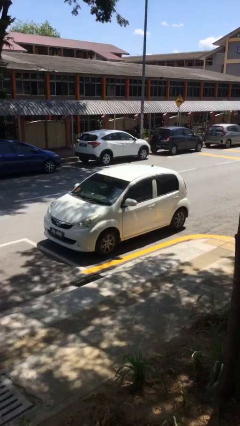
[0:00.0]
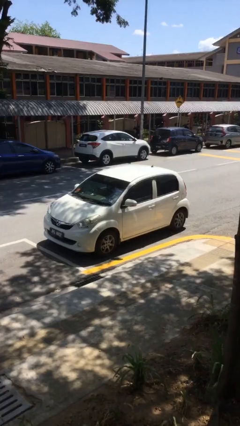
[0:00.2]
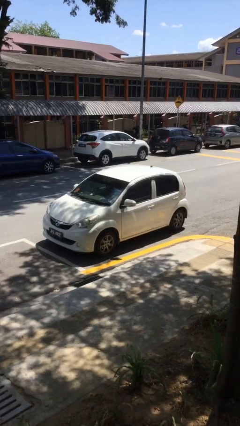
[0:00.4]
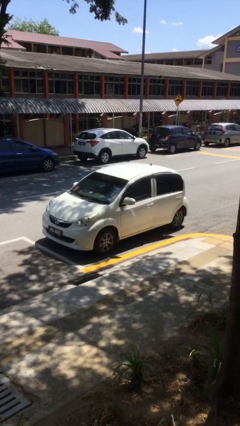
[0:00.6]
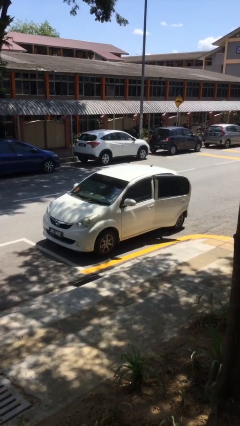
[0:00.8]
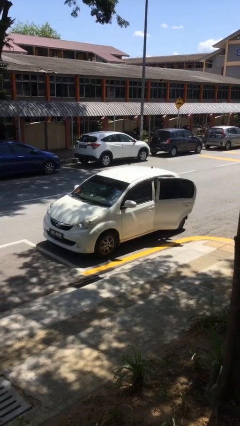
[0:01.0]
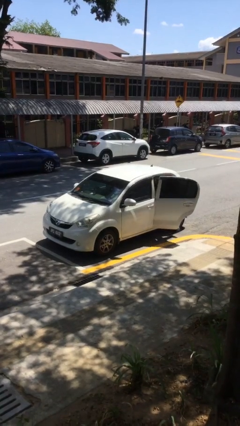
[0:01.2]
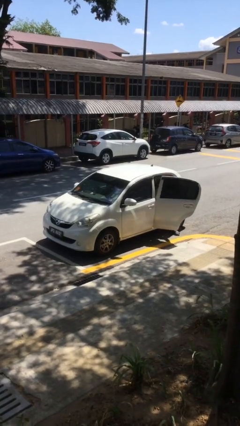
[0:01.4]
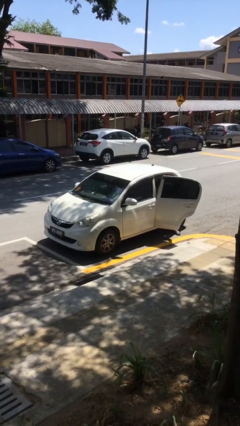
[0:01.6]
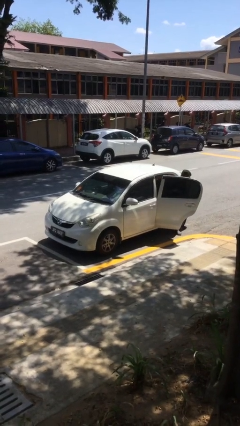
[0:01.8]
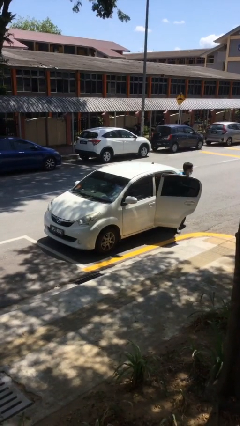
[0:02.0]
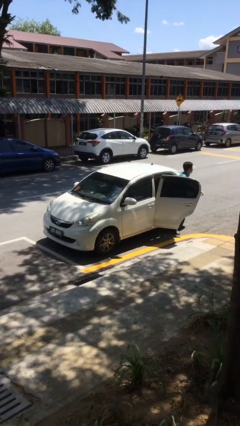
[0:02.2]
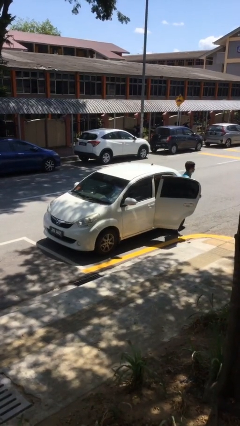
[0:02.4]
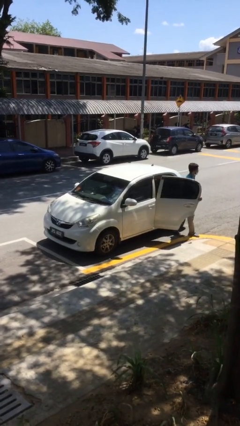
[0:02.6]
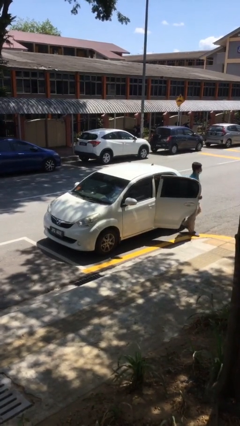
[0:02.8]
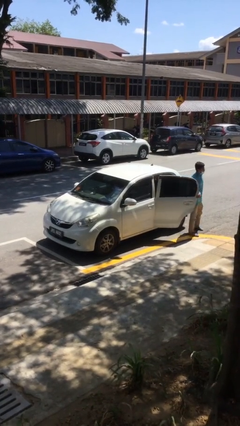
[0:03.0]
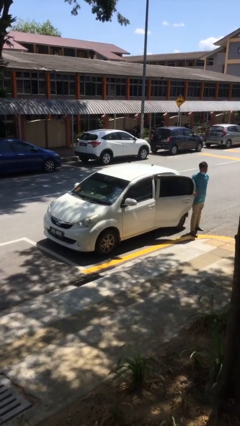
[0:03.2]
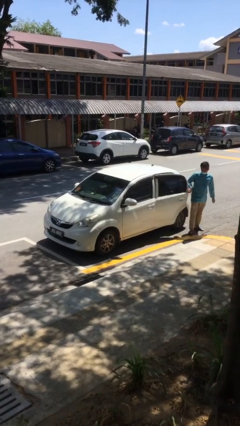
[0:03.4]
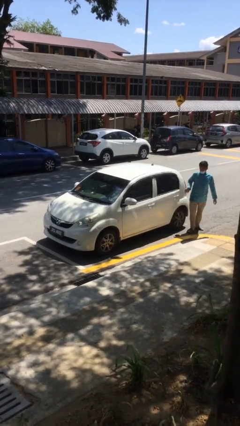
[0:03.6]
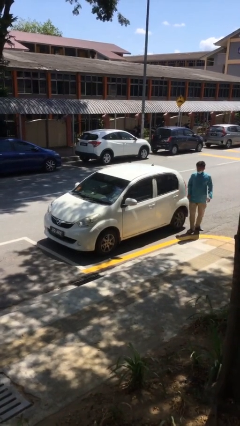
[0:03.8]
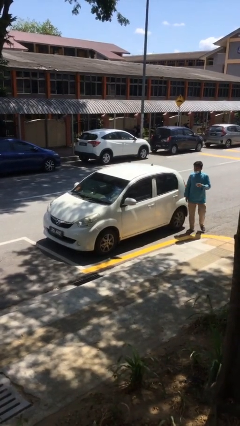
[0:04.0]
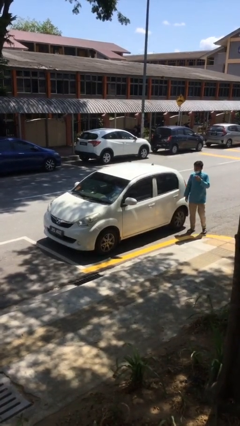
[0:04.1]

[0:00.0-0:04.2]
car drops off person

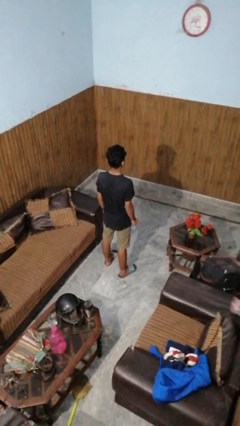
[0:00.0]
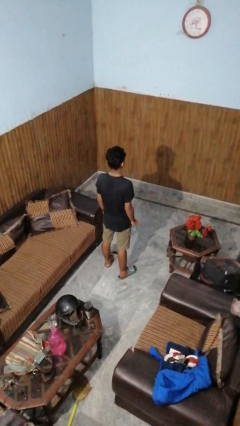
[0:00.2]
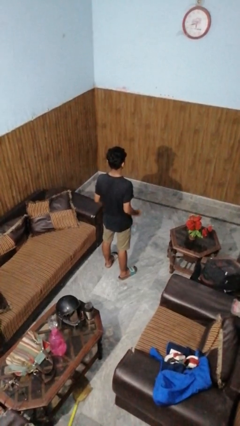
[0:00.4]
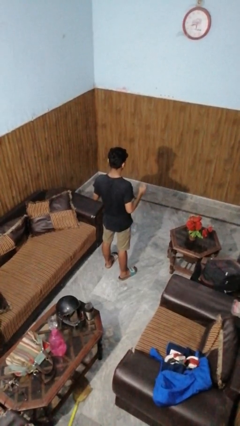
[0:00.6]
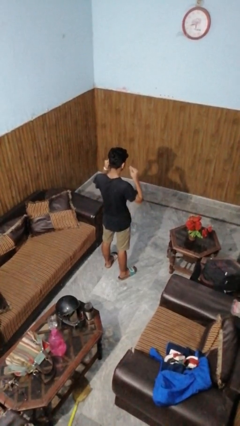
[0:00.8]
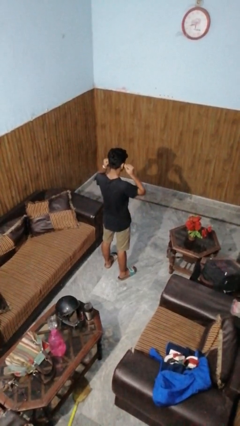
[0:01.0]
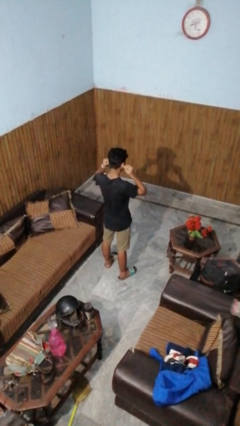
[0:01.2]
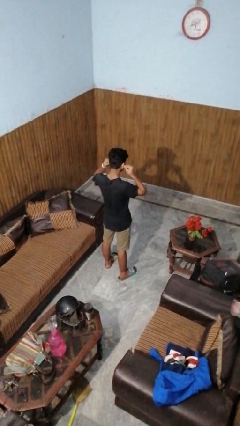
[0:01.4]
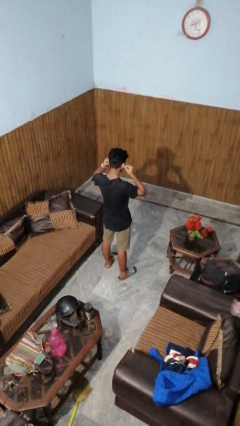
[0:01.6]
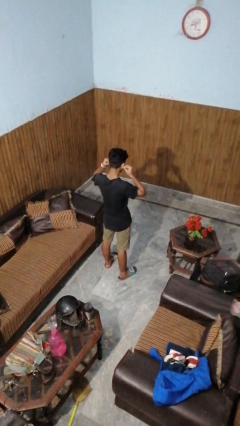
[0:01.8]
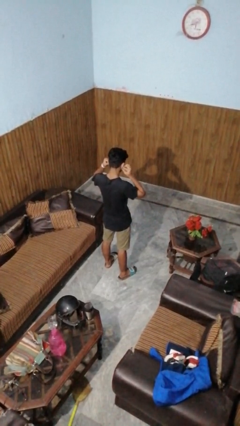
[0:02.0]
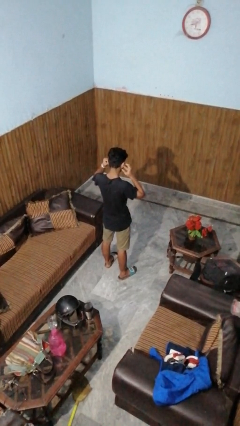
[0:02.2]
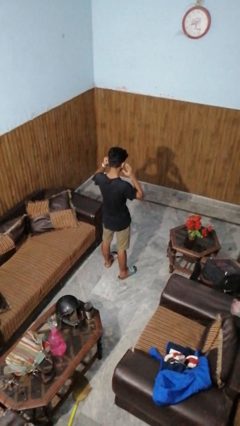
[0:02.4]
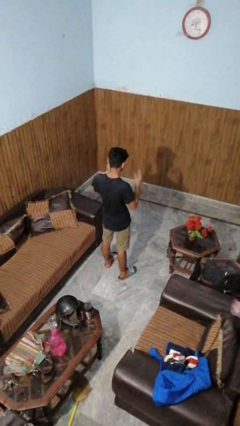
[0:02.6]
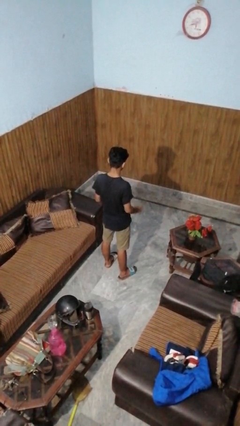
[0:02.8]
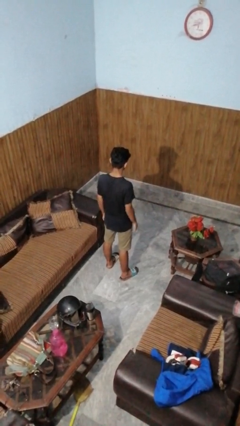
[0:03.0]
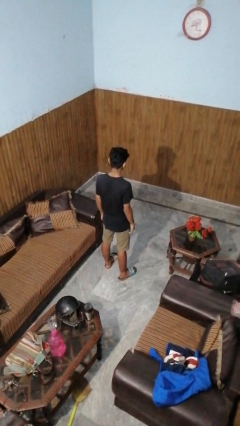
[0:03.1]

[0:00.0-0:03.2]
person puts on headphones

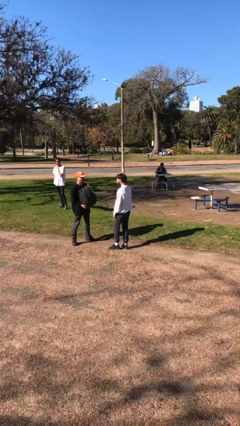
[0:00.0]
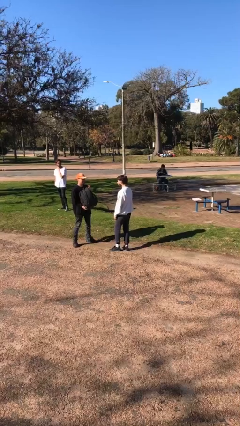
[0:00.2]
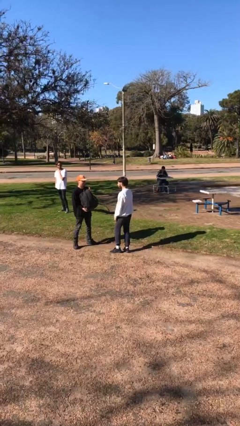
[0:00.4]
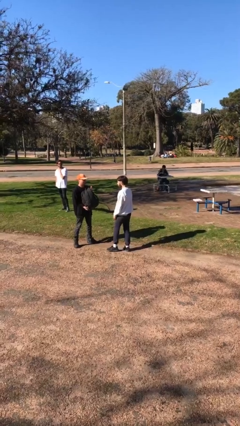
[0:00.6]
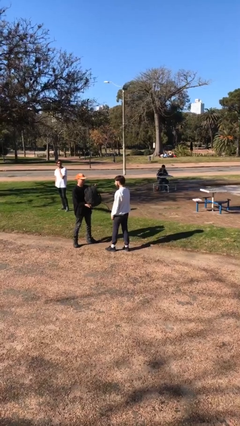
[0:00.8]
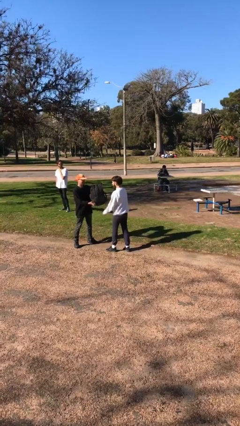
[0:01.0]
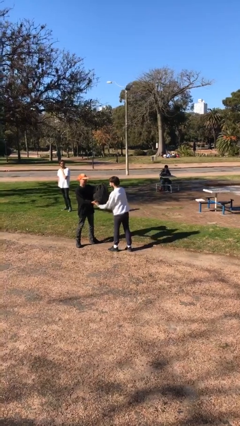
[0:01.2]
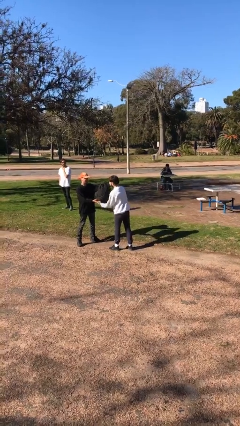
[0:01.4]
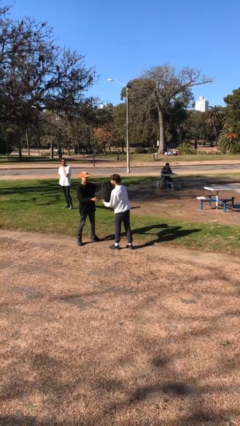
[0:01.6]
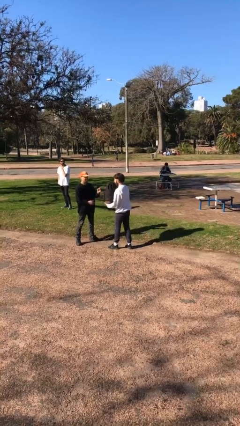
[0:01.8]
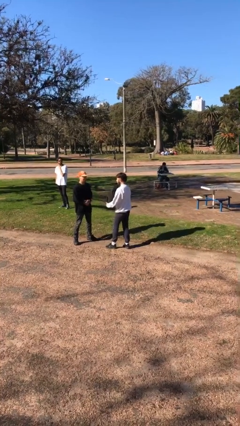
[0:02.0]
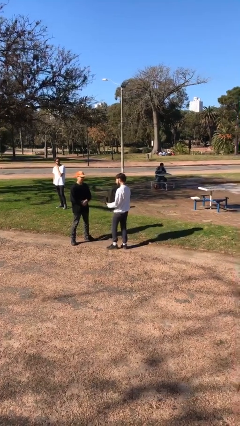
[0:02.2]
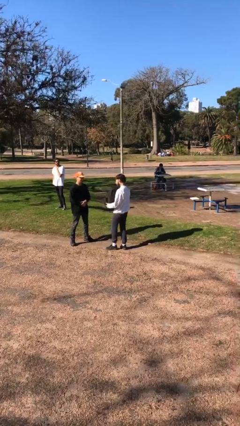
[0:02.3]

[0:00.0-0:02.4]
person transfers object to person

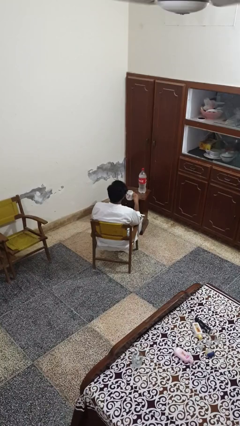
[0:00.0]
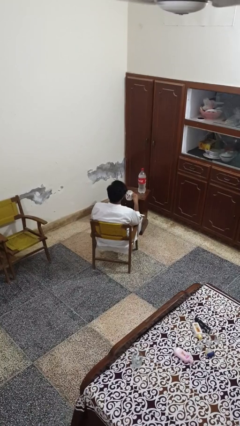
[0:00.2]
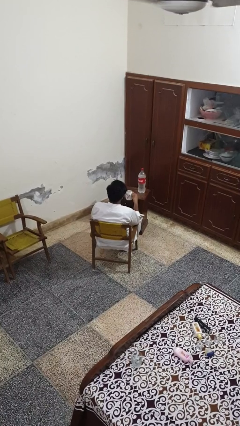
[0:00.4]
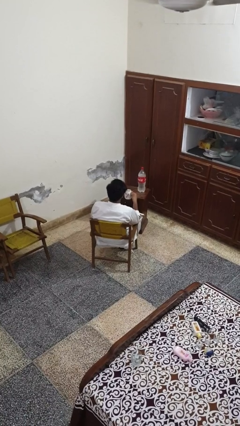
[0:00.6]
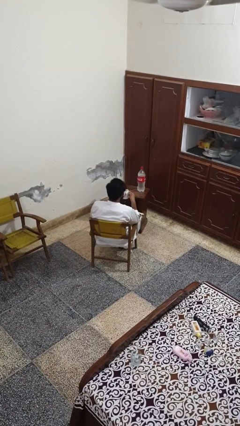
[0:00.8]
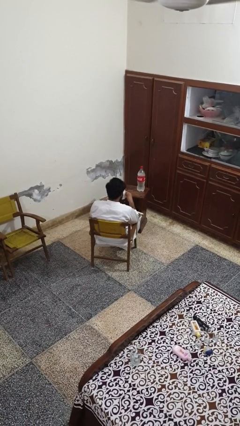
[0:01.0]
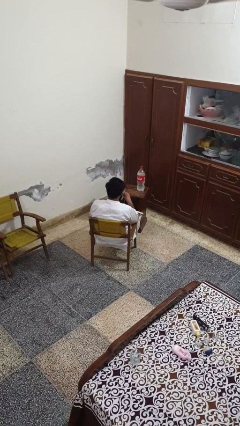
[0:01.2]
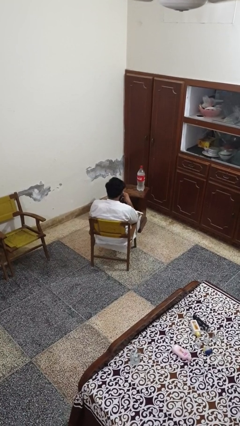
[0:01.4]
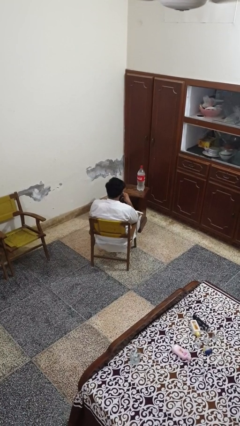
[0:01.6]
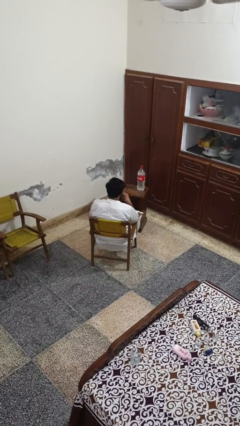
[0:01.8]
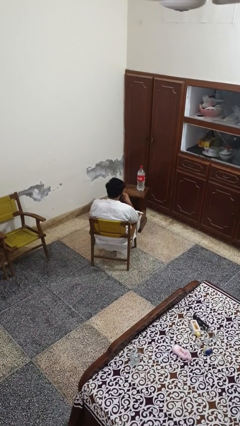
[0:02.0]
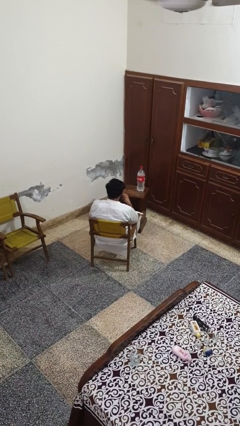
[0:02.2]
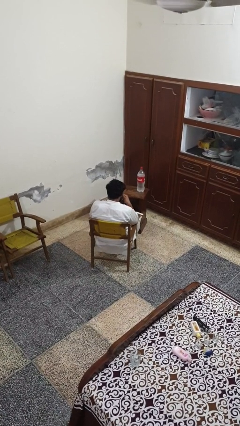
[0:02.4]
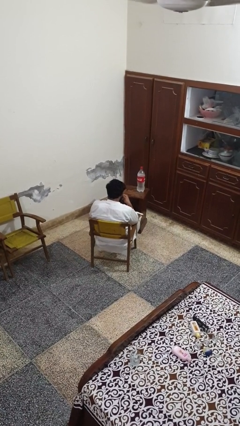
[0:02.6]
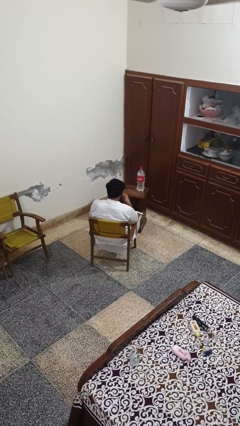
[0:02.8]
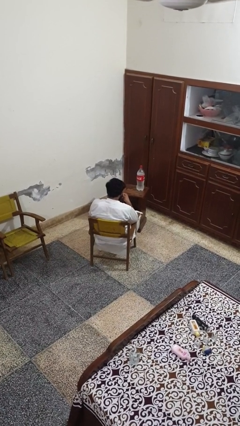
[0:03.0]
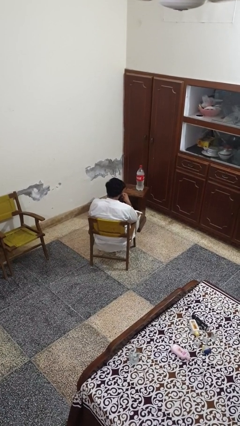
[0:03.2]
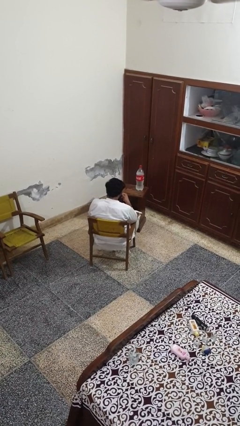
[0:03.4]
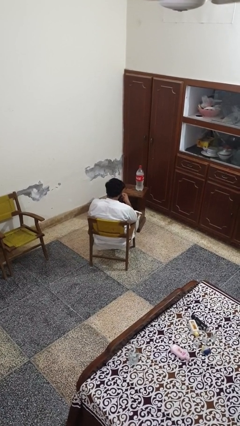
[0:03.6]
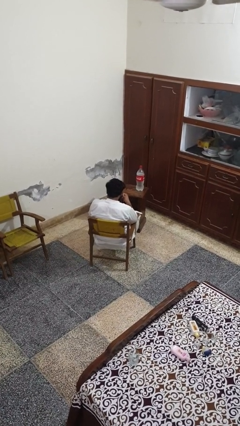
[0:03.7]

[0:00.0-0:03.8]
person drinks from mug

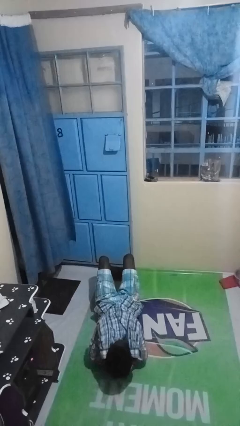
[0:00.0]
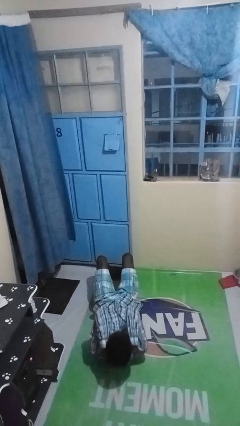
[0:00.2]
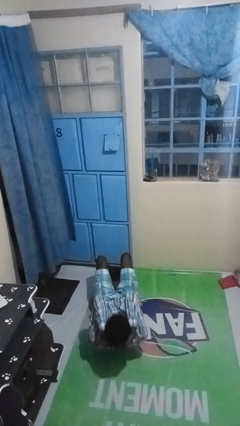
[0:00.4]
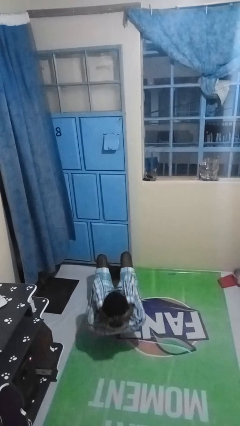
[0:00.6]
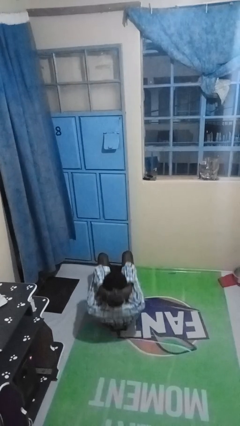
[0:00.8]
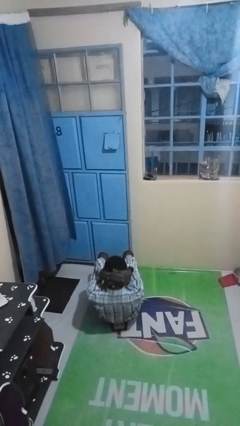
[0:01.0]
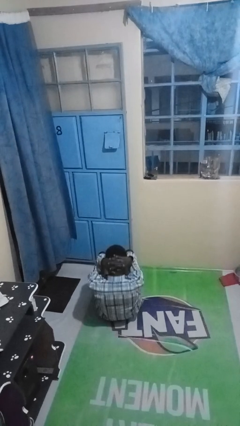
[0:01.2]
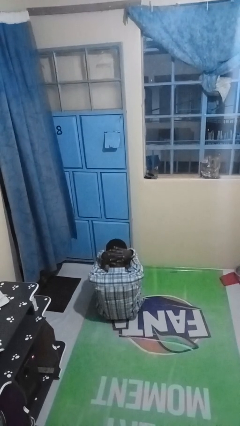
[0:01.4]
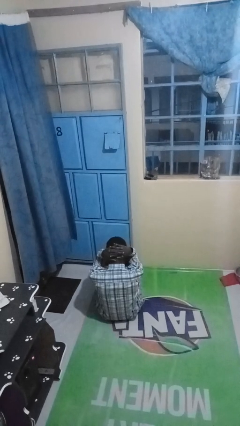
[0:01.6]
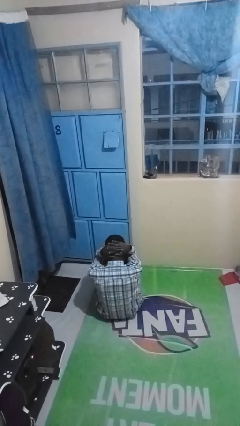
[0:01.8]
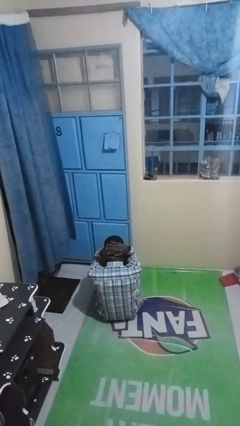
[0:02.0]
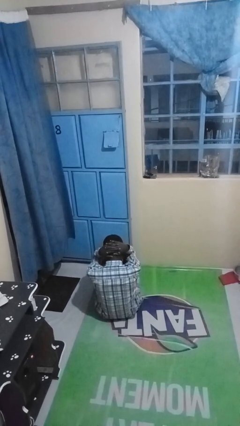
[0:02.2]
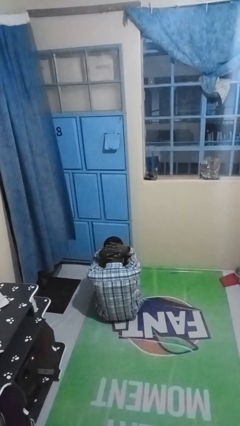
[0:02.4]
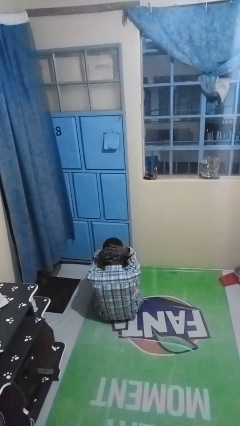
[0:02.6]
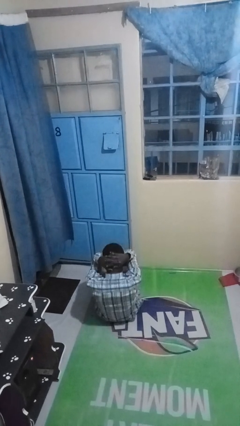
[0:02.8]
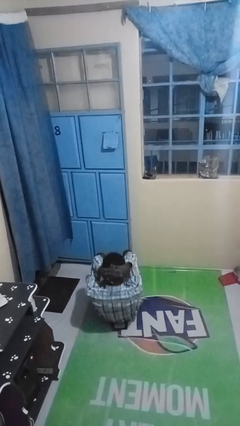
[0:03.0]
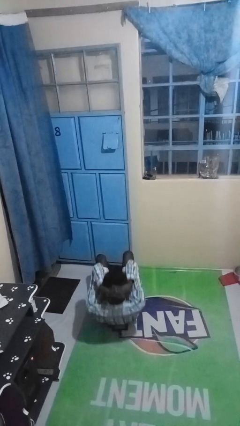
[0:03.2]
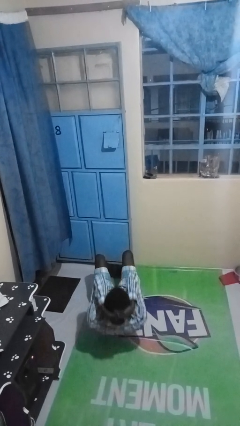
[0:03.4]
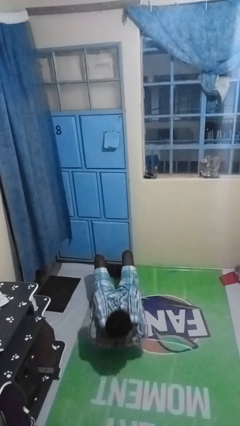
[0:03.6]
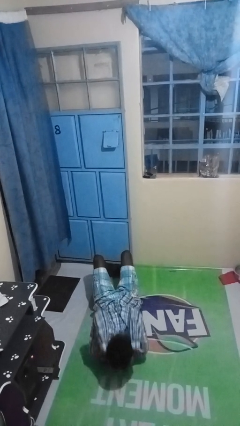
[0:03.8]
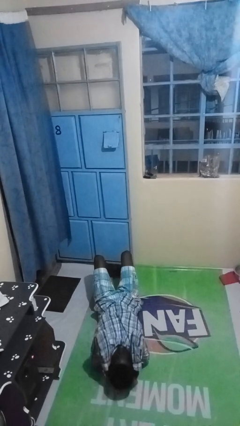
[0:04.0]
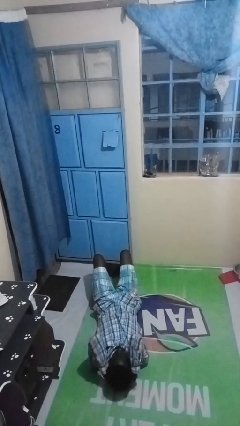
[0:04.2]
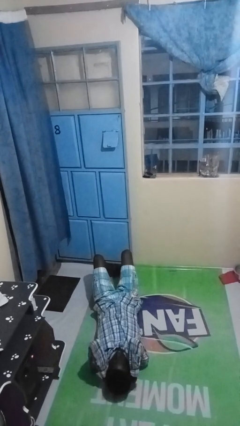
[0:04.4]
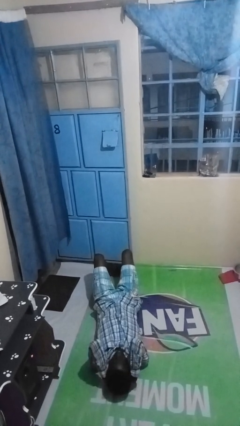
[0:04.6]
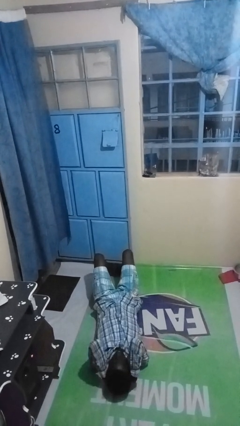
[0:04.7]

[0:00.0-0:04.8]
person exercises with situp
